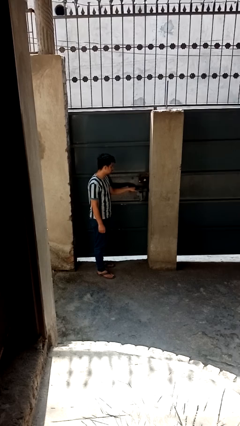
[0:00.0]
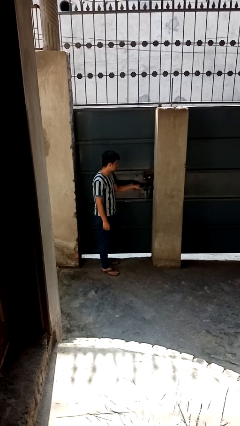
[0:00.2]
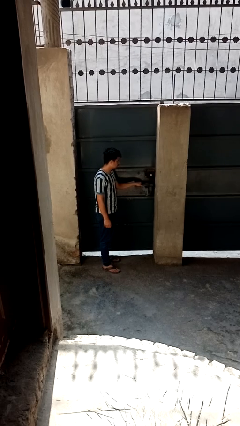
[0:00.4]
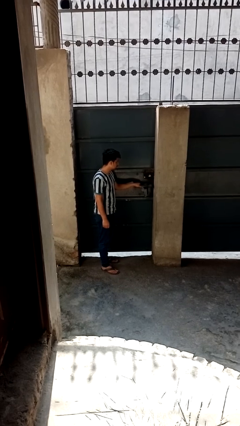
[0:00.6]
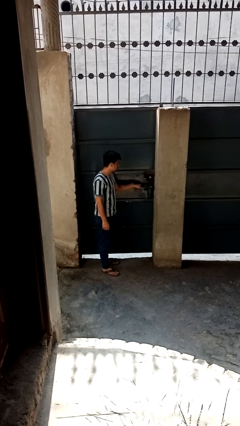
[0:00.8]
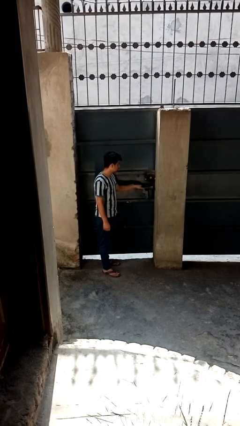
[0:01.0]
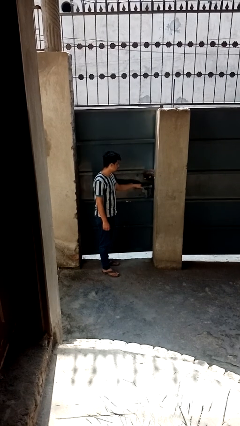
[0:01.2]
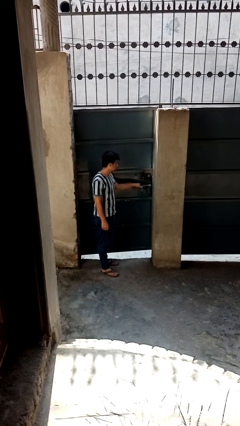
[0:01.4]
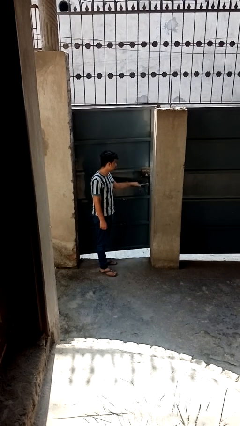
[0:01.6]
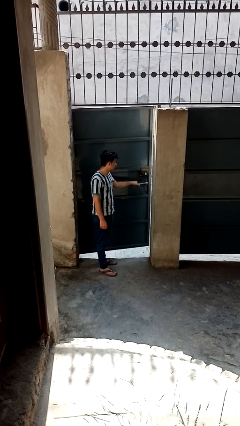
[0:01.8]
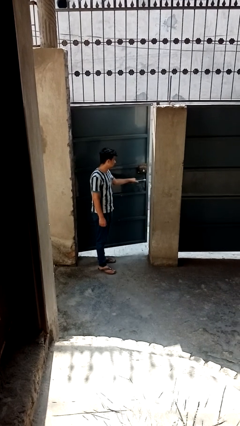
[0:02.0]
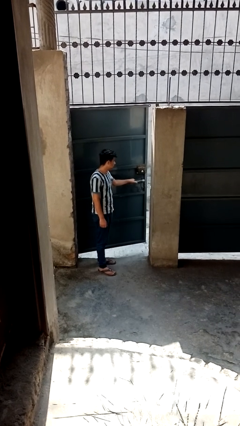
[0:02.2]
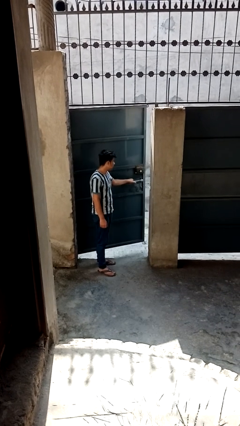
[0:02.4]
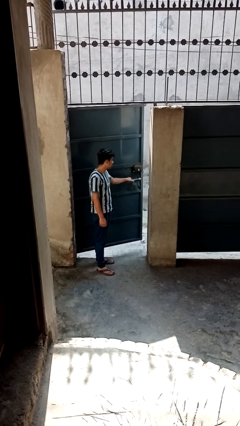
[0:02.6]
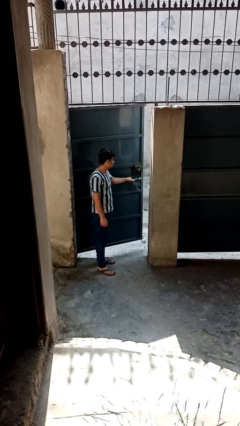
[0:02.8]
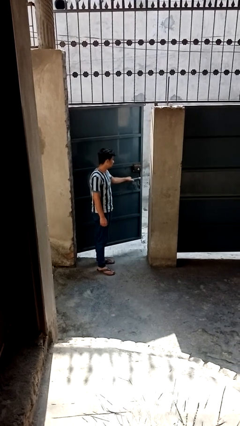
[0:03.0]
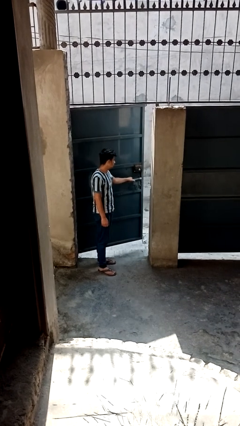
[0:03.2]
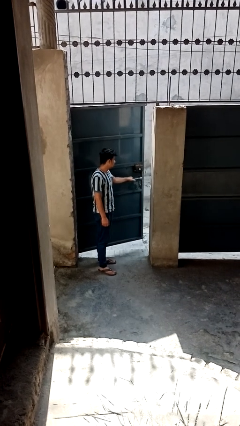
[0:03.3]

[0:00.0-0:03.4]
person opens gate

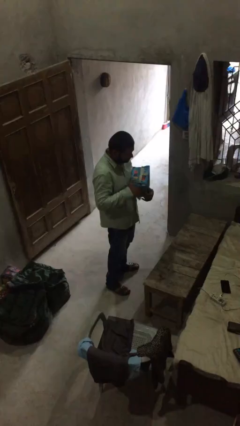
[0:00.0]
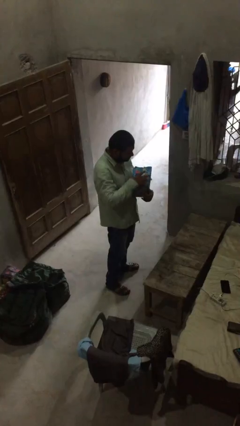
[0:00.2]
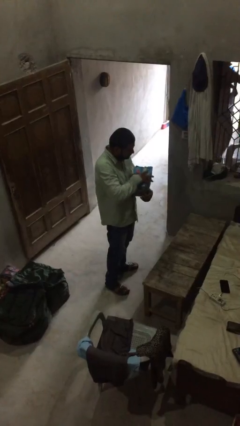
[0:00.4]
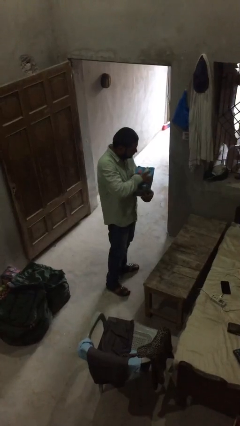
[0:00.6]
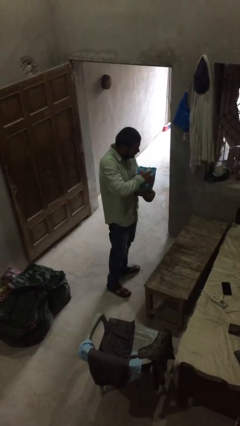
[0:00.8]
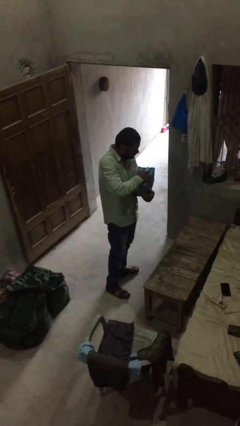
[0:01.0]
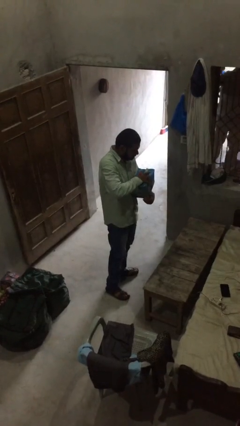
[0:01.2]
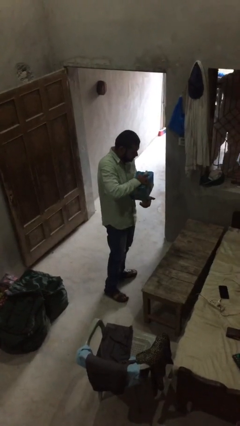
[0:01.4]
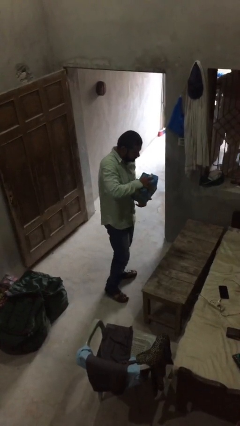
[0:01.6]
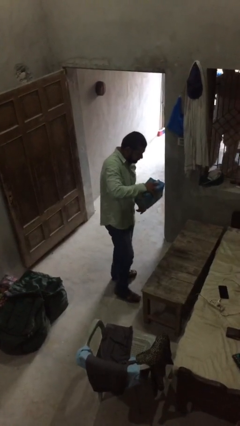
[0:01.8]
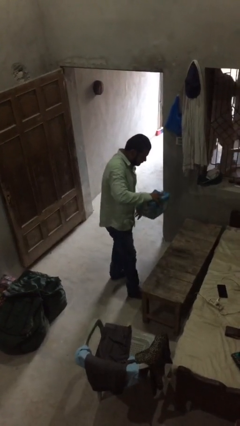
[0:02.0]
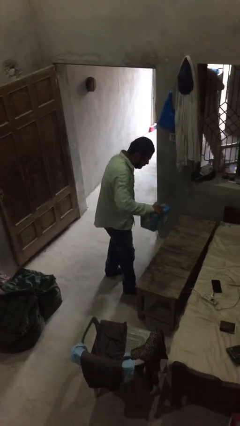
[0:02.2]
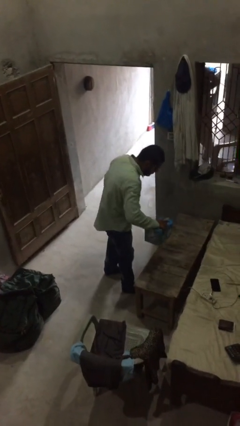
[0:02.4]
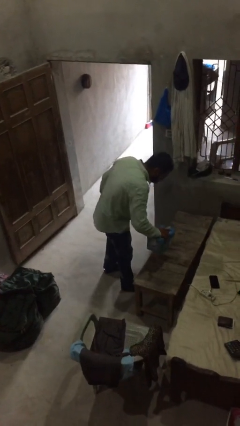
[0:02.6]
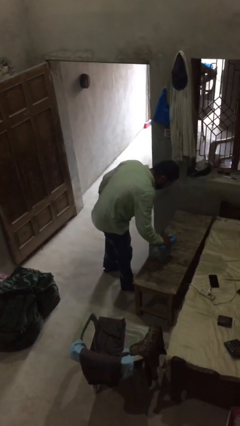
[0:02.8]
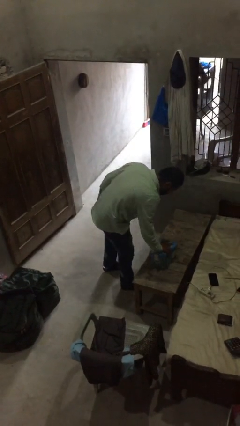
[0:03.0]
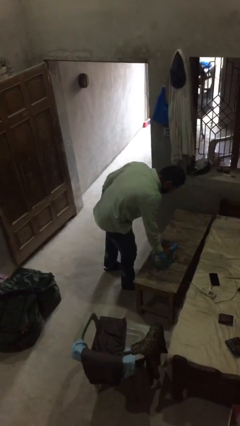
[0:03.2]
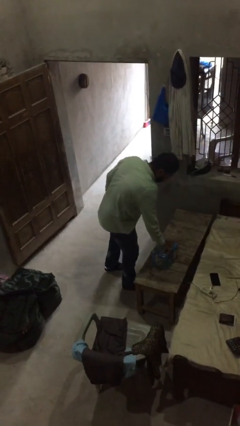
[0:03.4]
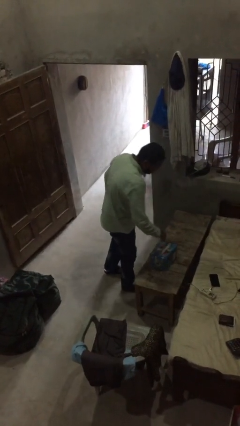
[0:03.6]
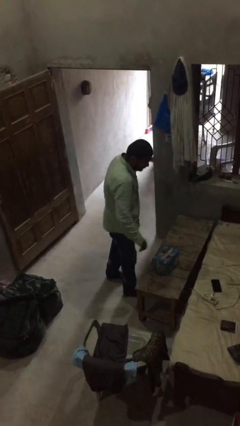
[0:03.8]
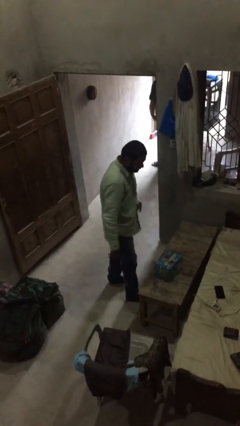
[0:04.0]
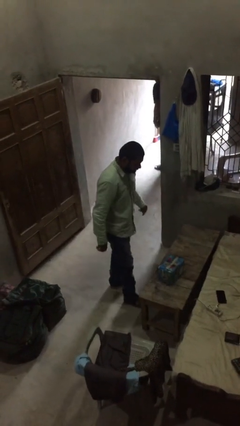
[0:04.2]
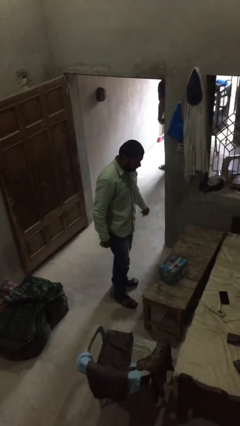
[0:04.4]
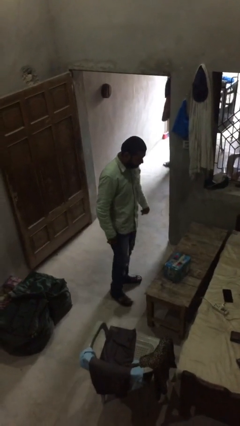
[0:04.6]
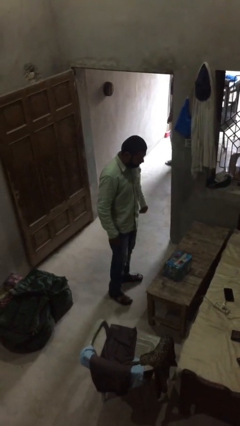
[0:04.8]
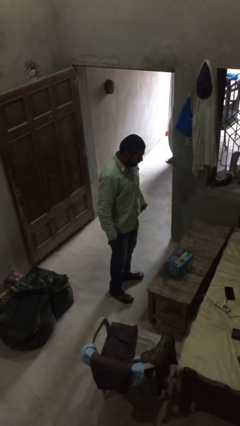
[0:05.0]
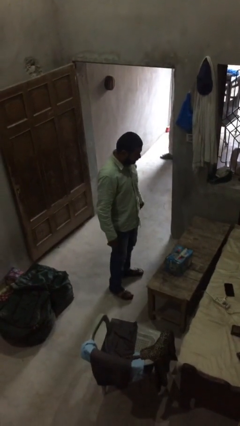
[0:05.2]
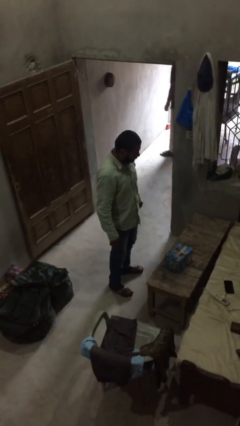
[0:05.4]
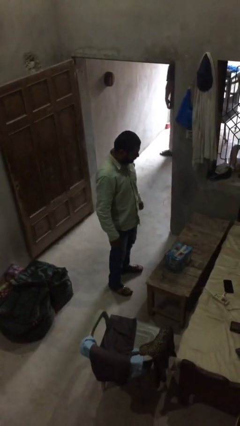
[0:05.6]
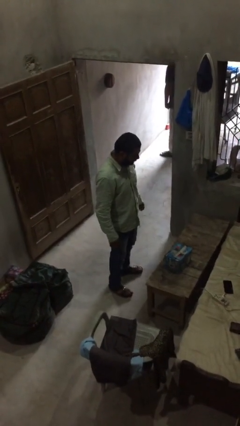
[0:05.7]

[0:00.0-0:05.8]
person puts down object on table

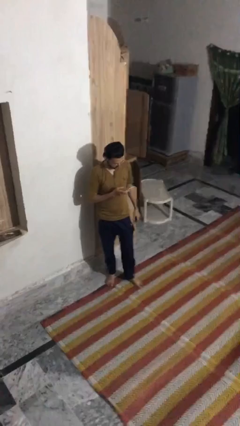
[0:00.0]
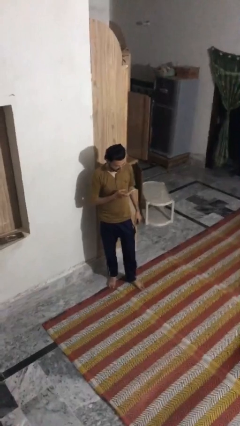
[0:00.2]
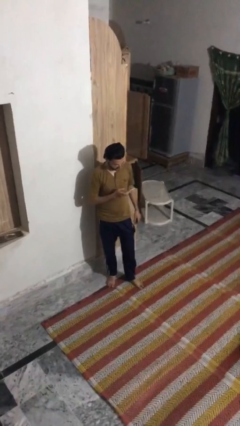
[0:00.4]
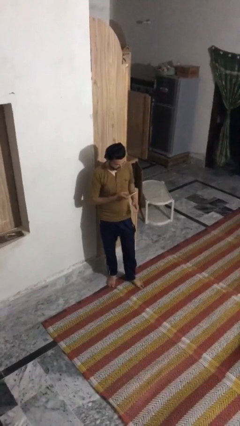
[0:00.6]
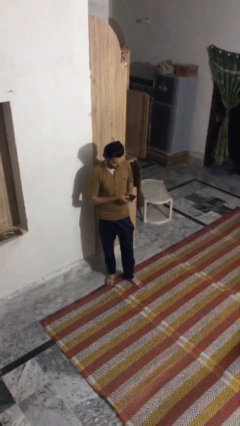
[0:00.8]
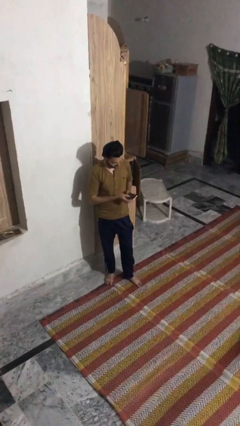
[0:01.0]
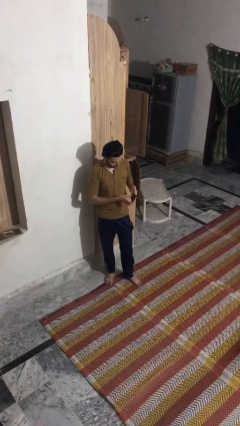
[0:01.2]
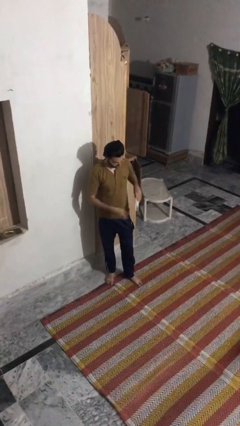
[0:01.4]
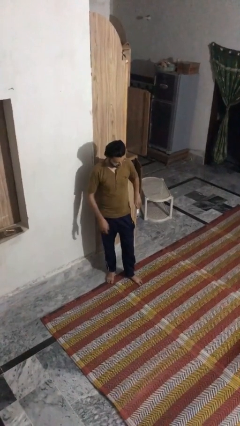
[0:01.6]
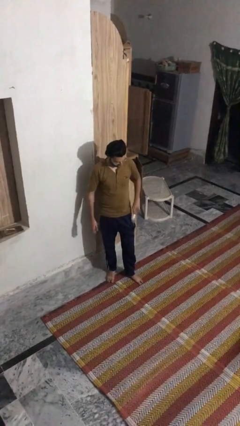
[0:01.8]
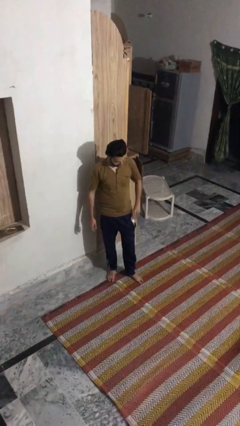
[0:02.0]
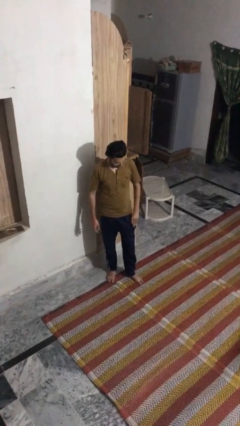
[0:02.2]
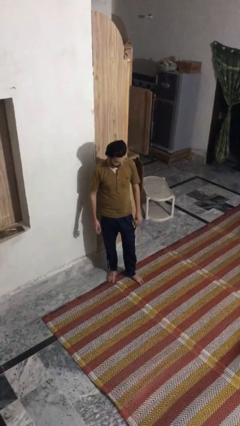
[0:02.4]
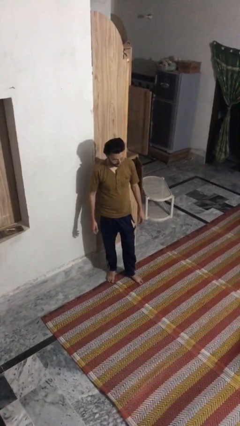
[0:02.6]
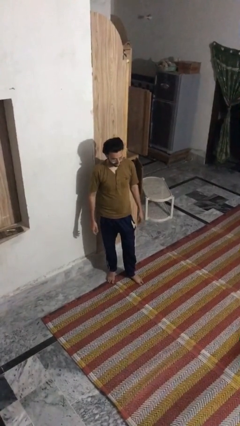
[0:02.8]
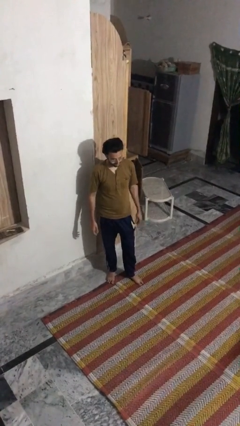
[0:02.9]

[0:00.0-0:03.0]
person puts phone into pocket

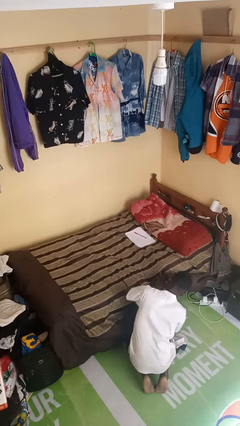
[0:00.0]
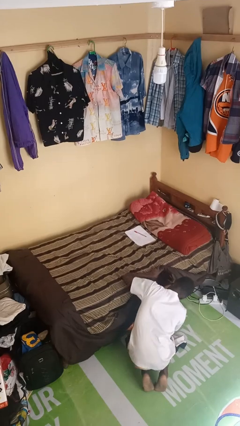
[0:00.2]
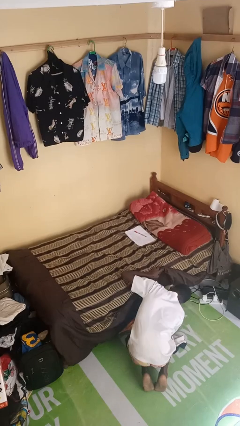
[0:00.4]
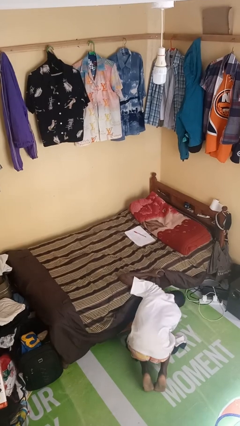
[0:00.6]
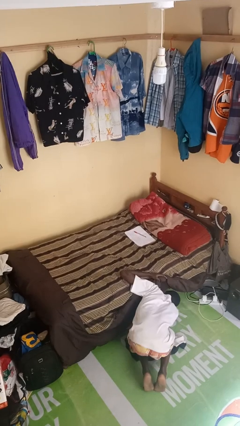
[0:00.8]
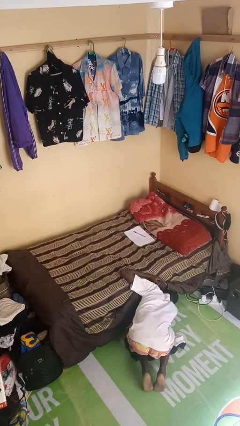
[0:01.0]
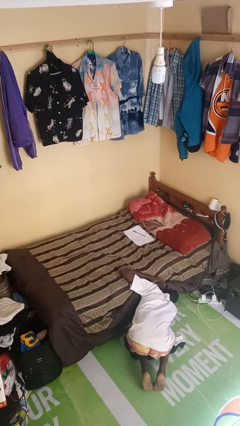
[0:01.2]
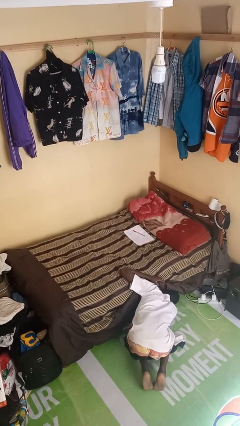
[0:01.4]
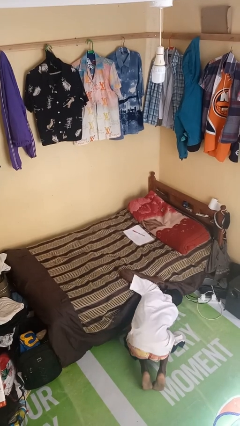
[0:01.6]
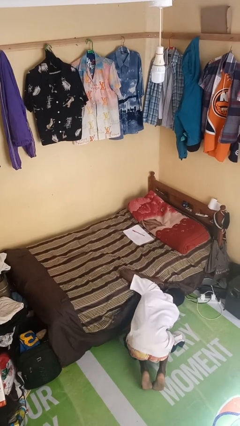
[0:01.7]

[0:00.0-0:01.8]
person searches under bed

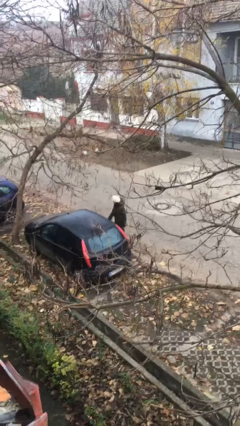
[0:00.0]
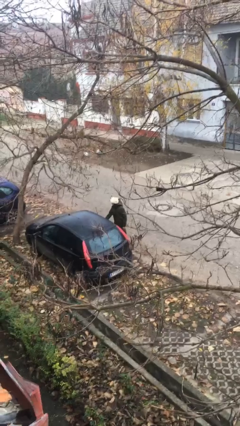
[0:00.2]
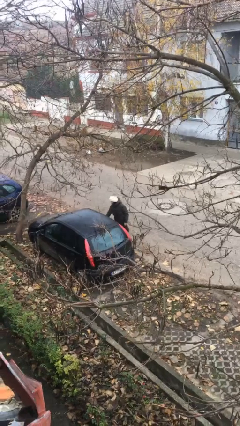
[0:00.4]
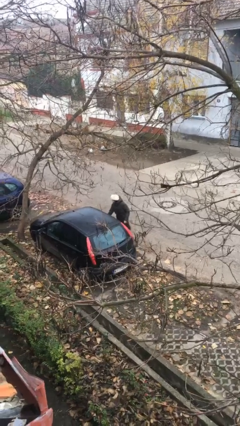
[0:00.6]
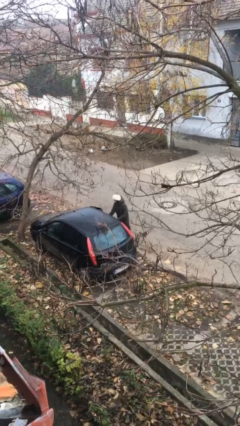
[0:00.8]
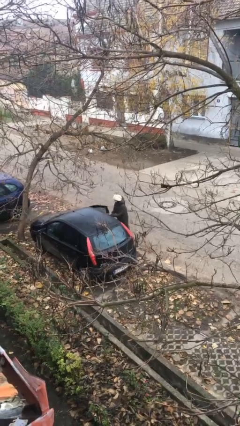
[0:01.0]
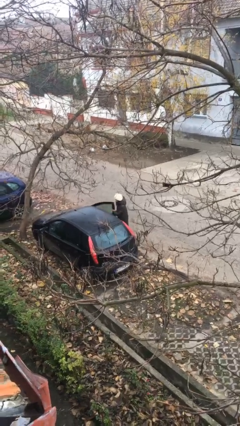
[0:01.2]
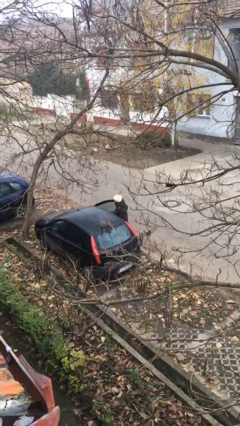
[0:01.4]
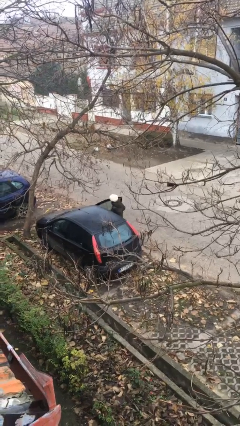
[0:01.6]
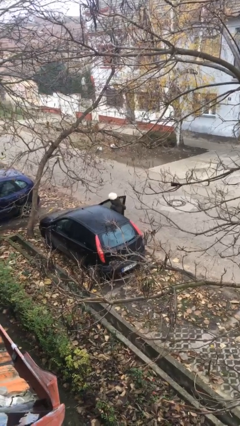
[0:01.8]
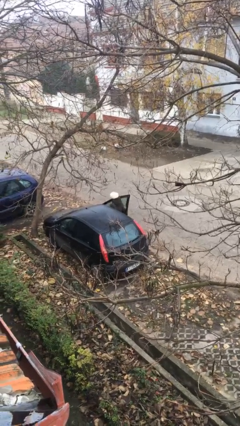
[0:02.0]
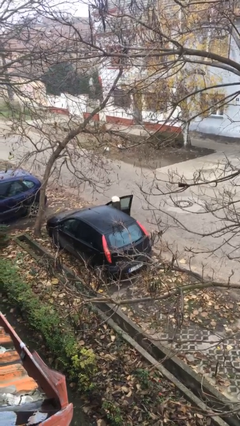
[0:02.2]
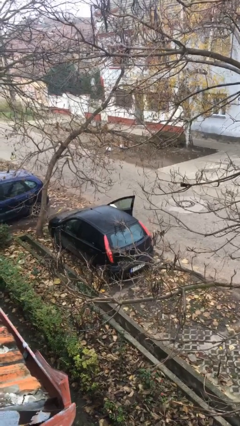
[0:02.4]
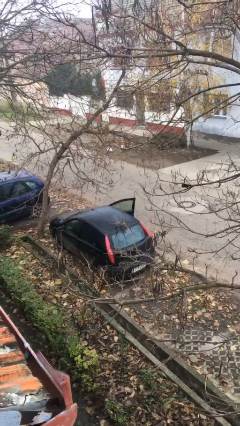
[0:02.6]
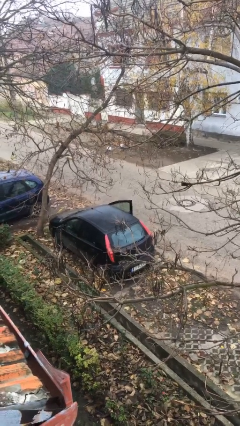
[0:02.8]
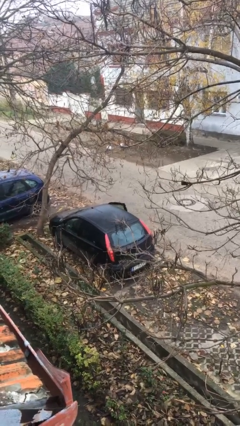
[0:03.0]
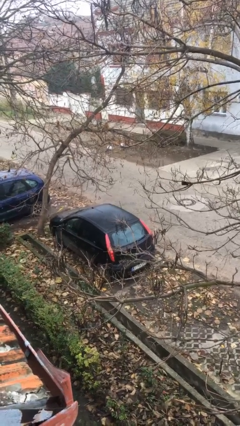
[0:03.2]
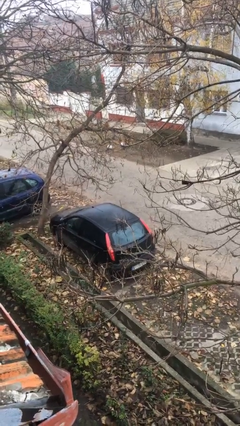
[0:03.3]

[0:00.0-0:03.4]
person enters car
